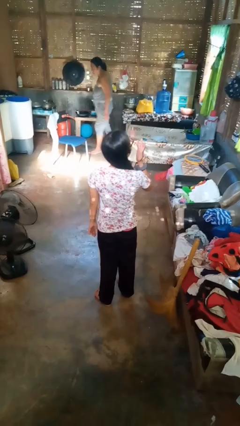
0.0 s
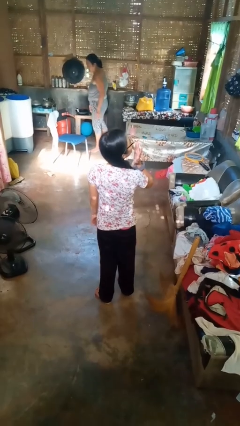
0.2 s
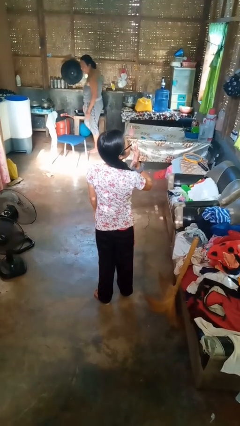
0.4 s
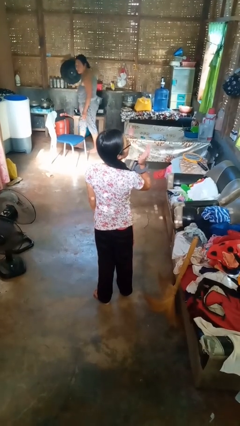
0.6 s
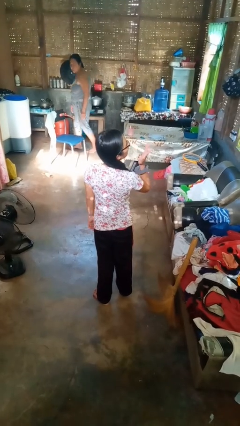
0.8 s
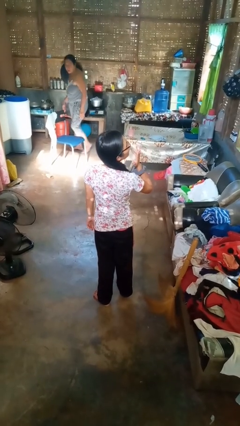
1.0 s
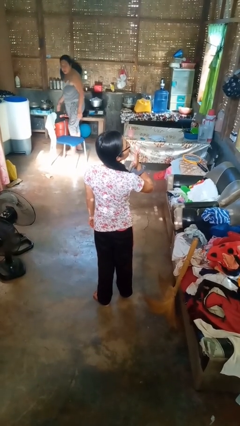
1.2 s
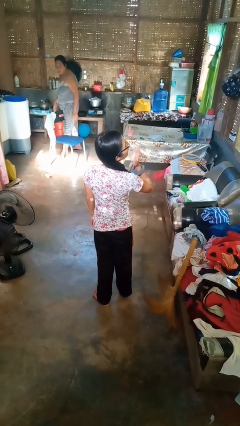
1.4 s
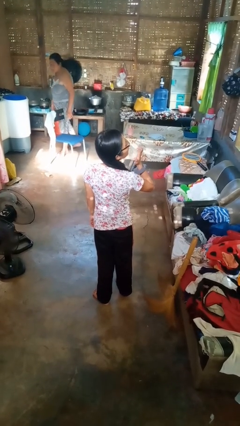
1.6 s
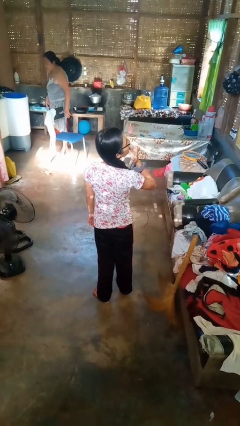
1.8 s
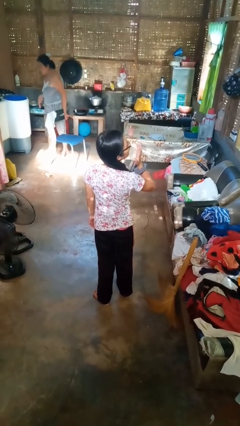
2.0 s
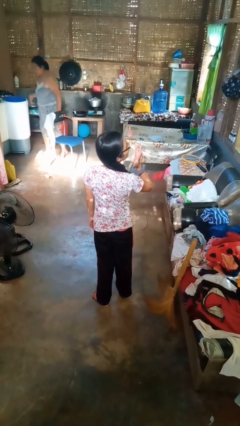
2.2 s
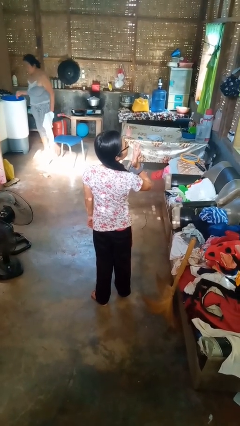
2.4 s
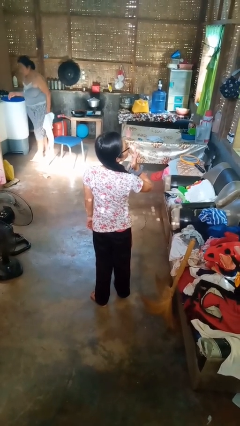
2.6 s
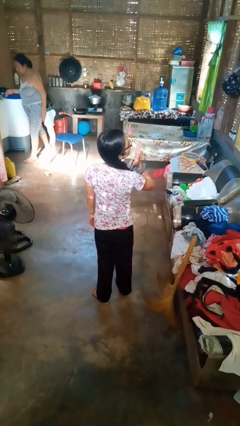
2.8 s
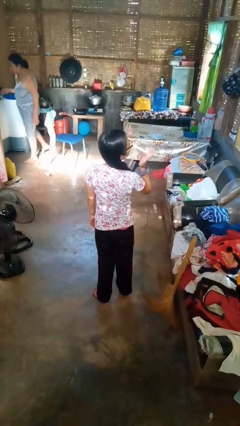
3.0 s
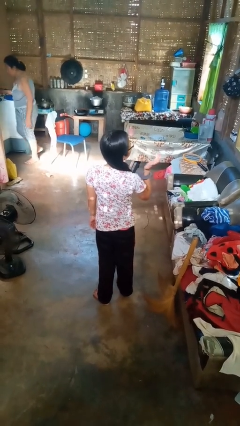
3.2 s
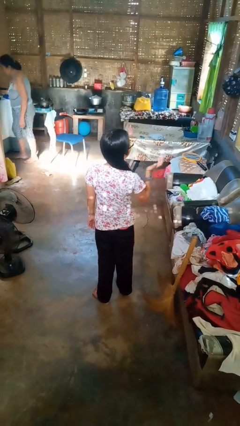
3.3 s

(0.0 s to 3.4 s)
person licks fingers

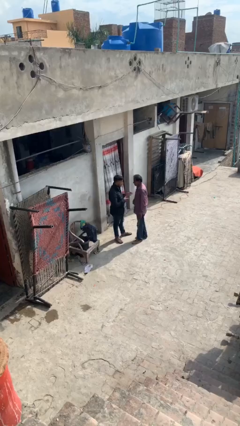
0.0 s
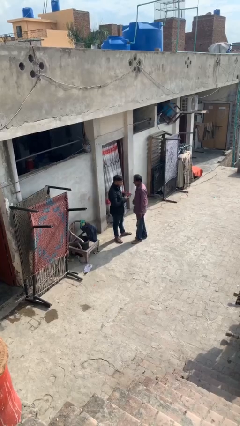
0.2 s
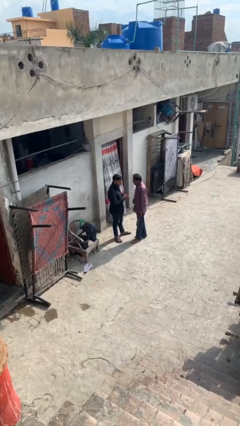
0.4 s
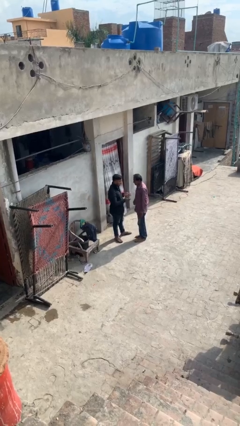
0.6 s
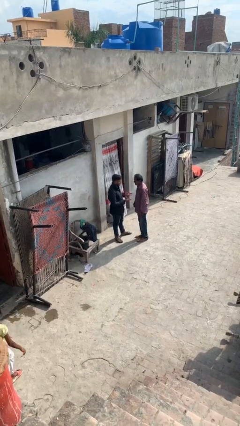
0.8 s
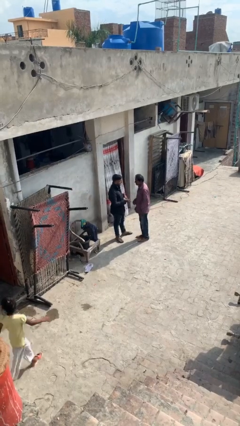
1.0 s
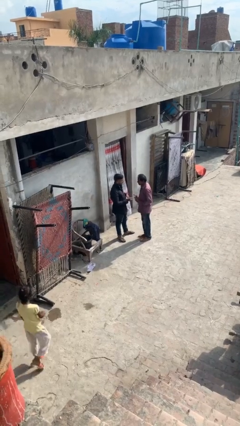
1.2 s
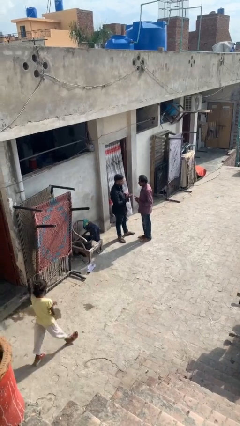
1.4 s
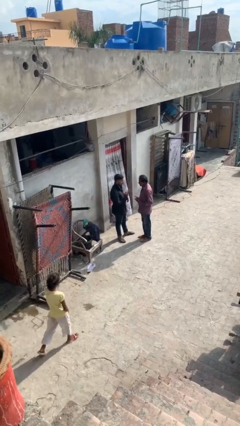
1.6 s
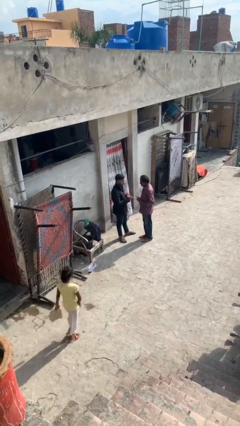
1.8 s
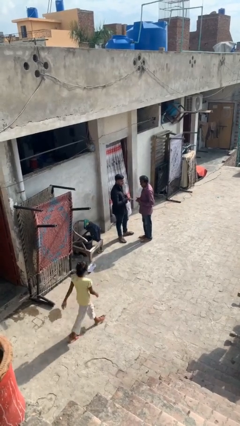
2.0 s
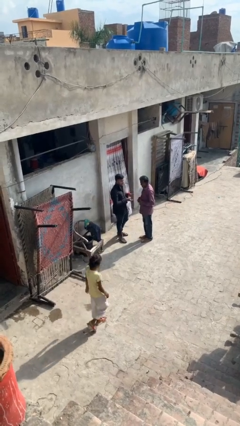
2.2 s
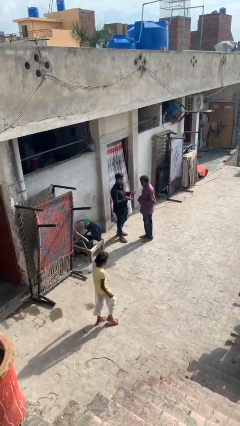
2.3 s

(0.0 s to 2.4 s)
person talks to person

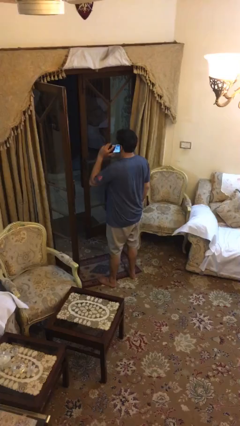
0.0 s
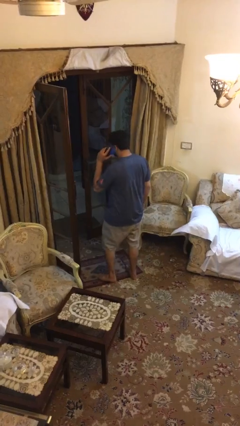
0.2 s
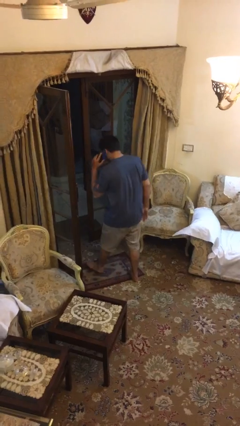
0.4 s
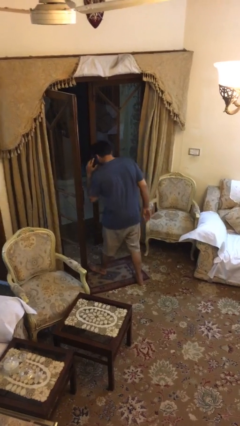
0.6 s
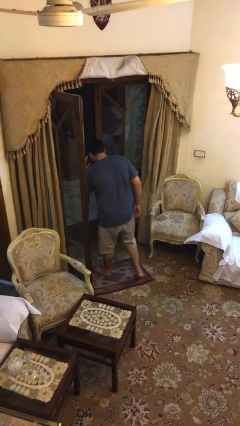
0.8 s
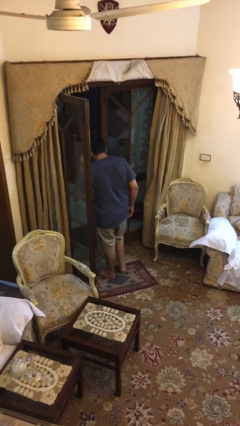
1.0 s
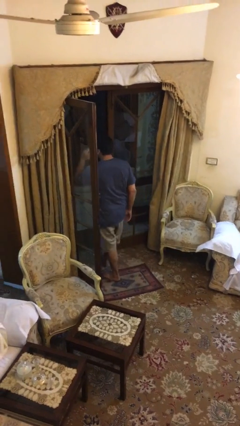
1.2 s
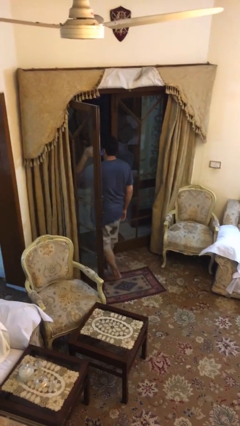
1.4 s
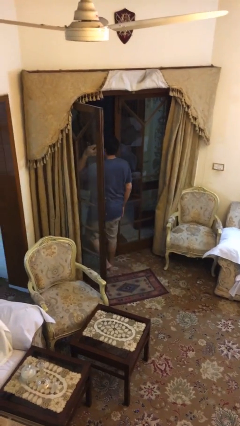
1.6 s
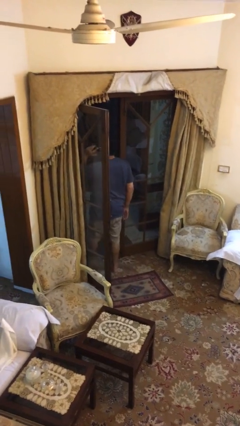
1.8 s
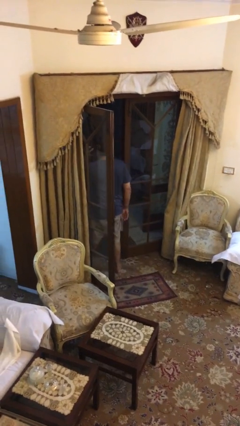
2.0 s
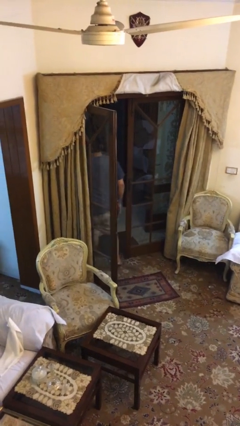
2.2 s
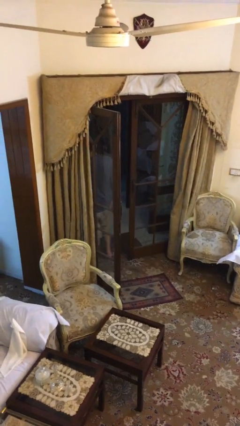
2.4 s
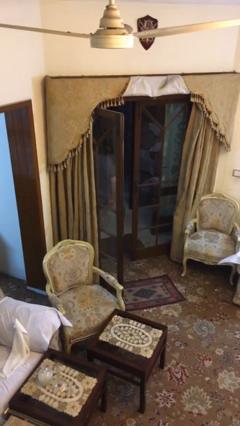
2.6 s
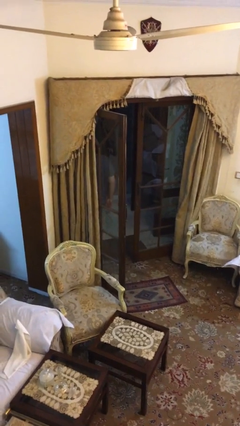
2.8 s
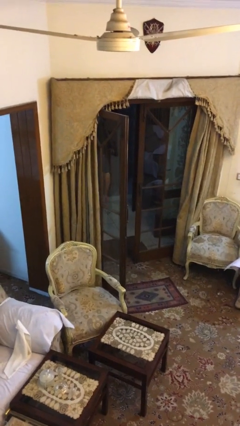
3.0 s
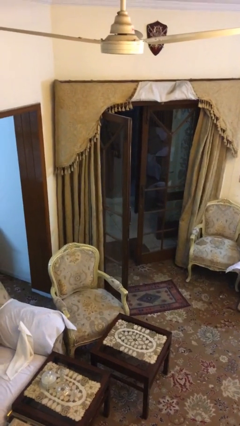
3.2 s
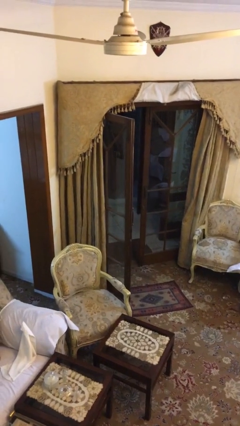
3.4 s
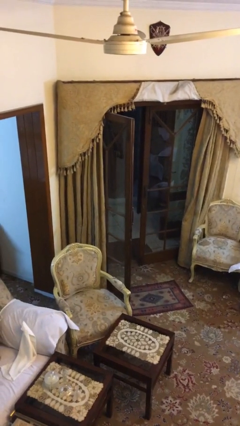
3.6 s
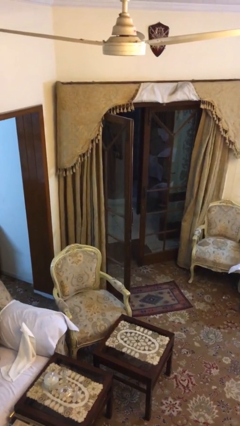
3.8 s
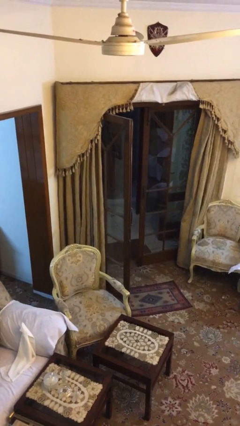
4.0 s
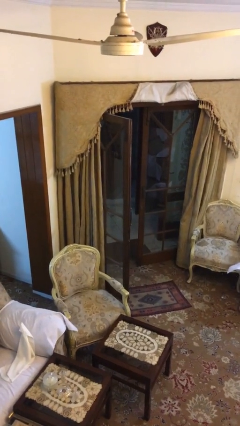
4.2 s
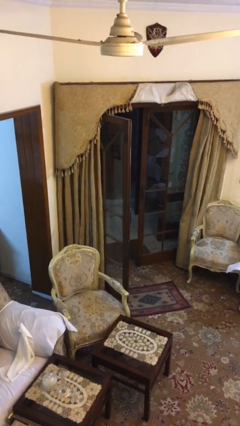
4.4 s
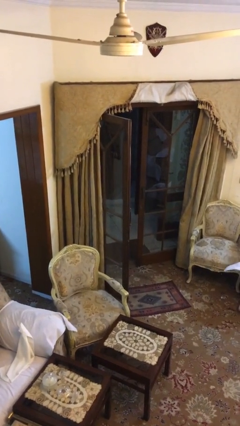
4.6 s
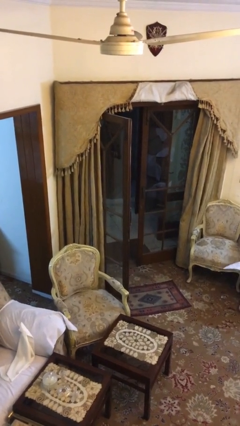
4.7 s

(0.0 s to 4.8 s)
person exits scene through structure

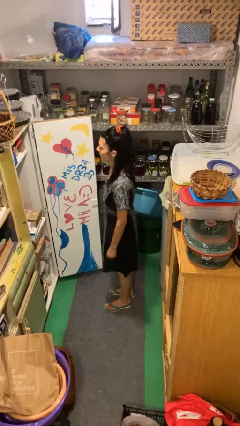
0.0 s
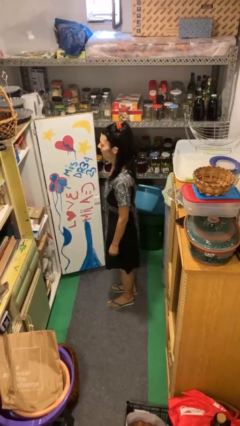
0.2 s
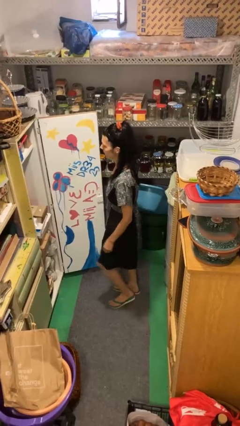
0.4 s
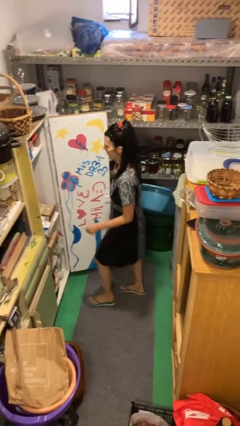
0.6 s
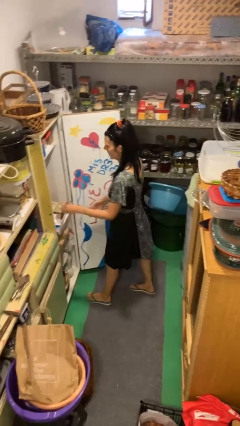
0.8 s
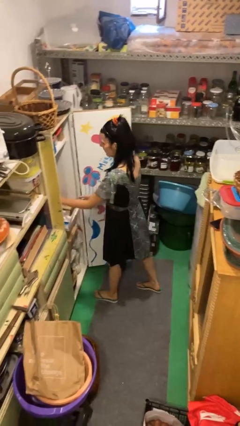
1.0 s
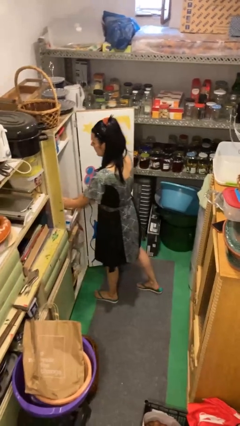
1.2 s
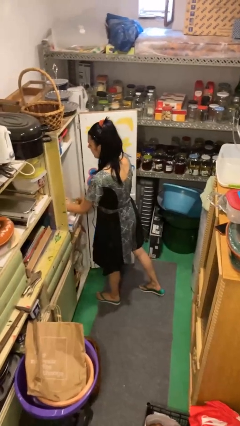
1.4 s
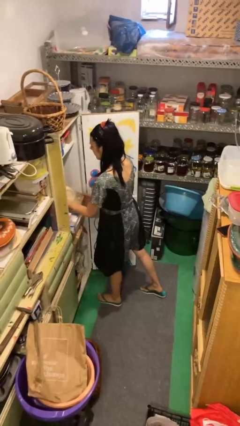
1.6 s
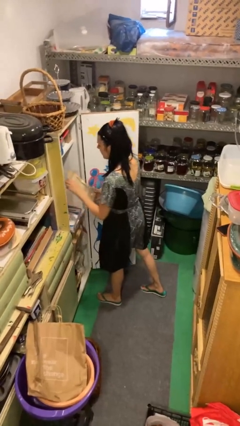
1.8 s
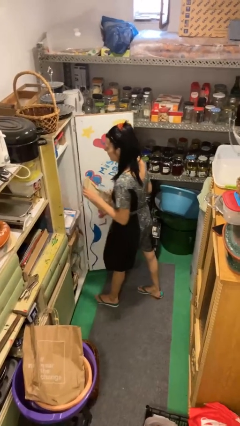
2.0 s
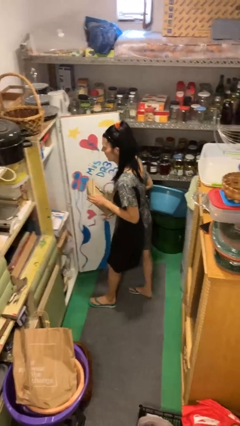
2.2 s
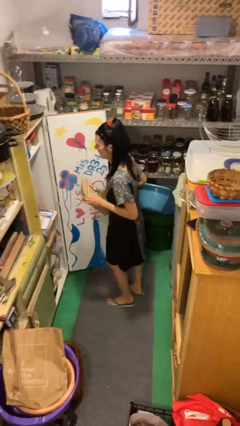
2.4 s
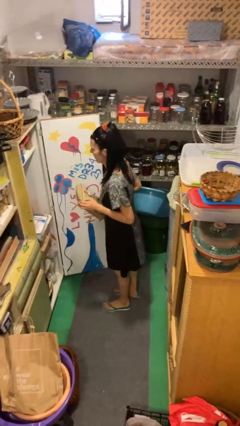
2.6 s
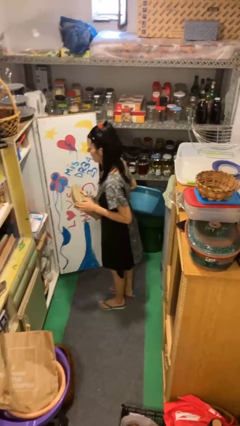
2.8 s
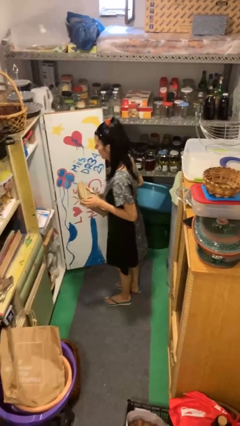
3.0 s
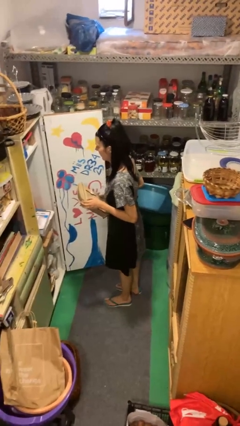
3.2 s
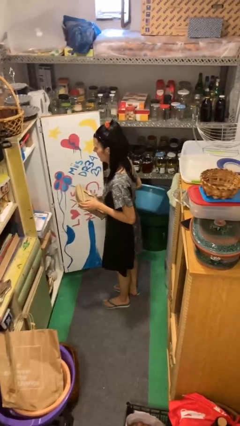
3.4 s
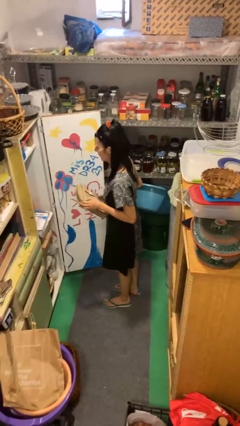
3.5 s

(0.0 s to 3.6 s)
person picks up object from cabinet

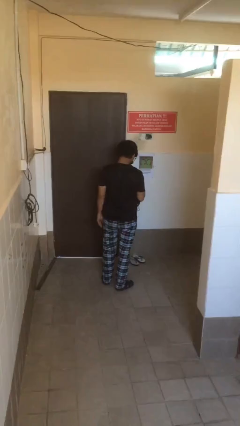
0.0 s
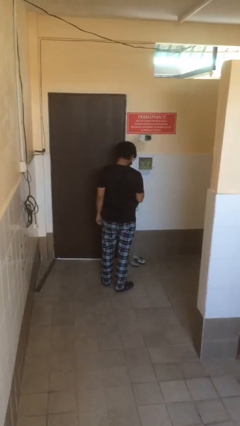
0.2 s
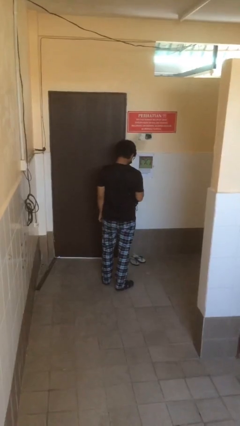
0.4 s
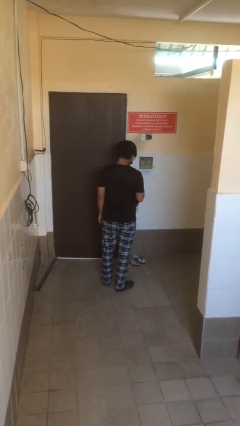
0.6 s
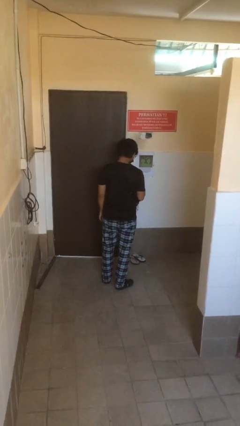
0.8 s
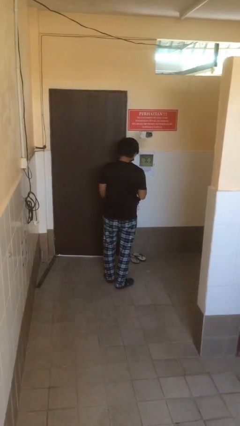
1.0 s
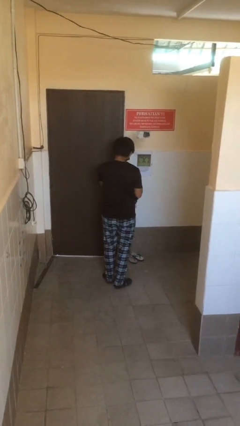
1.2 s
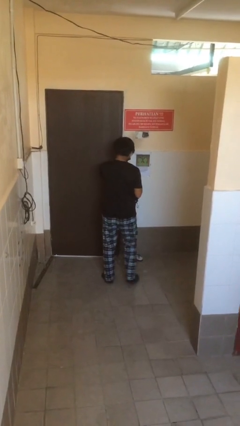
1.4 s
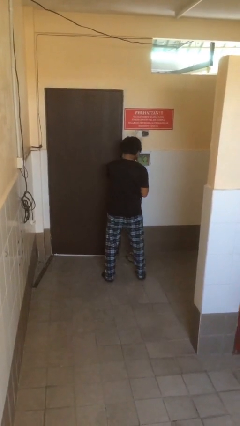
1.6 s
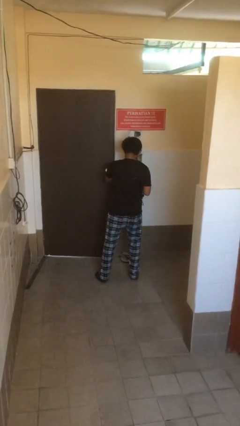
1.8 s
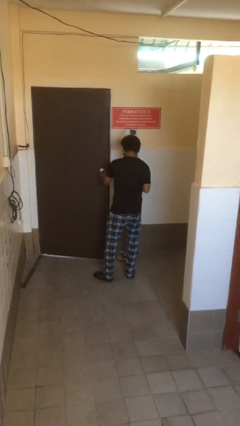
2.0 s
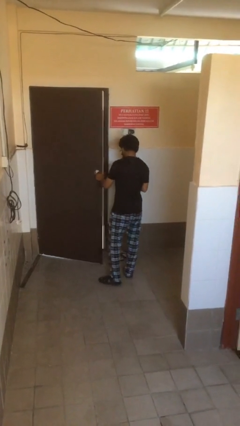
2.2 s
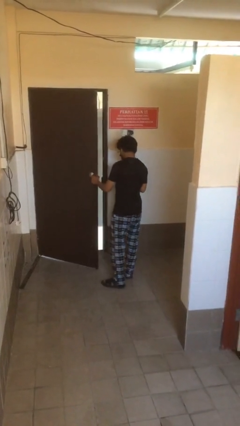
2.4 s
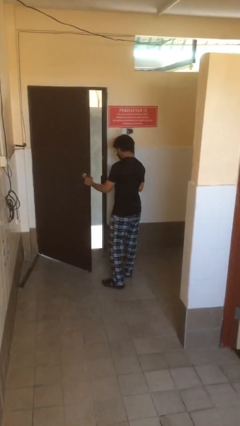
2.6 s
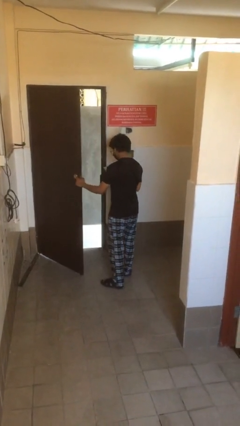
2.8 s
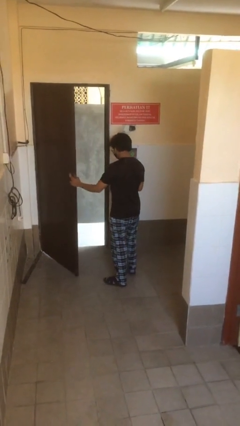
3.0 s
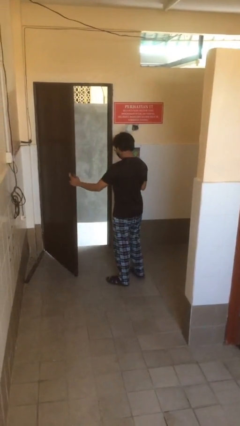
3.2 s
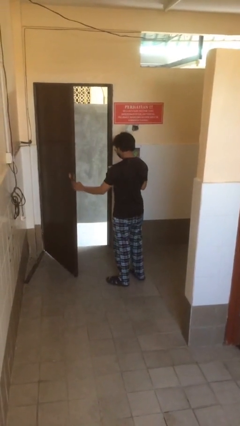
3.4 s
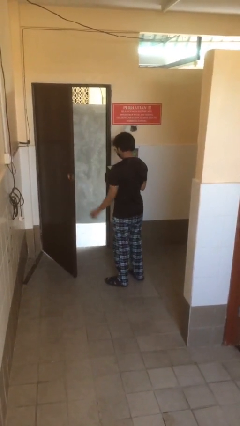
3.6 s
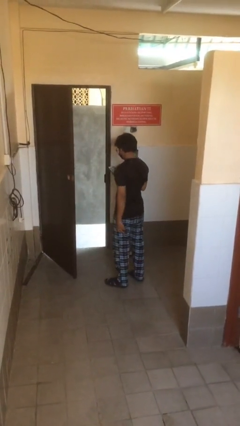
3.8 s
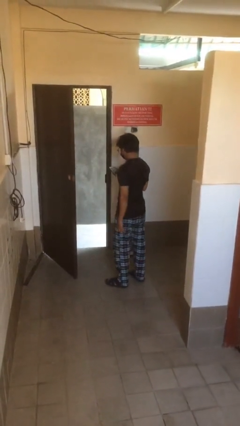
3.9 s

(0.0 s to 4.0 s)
person opens facility door
